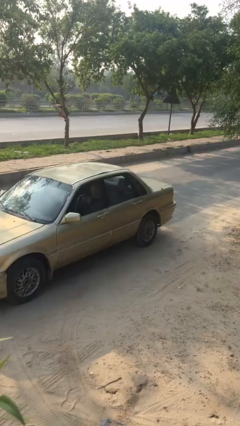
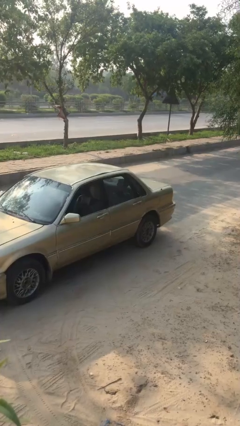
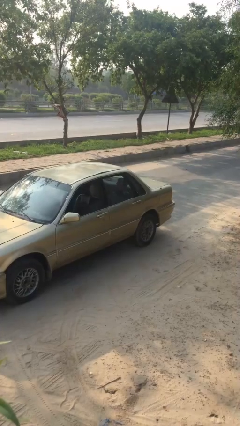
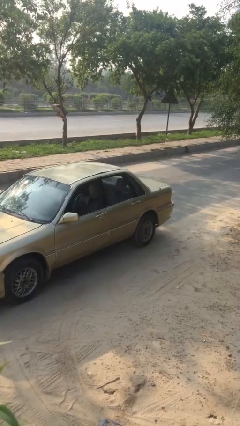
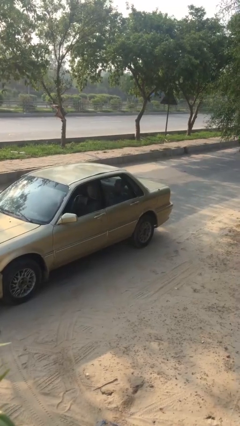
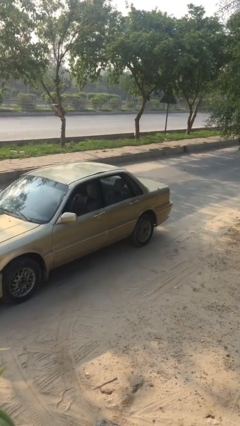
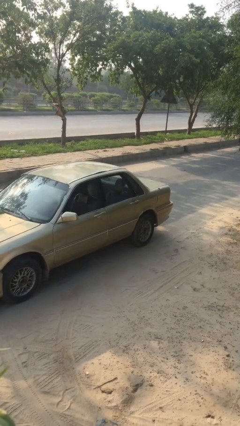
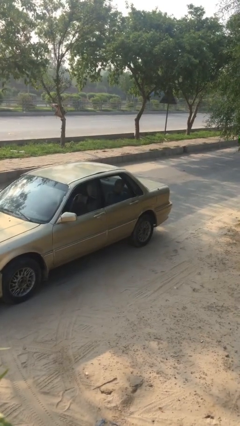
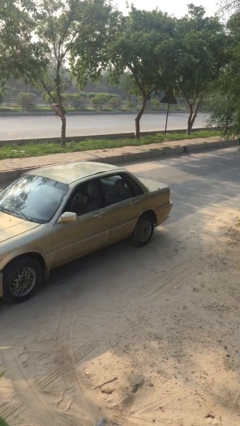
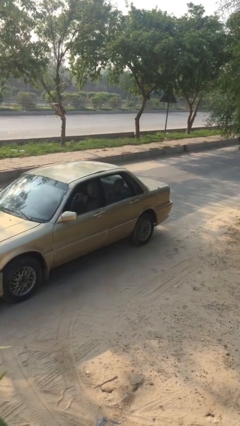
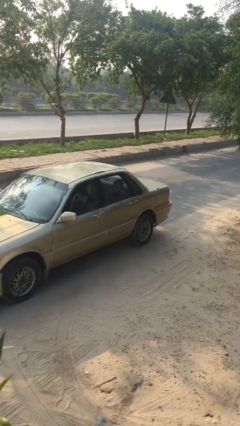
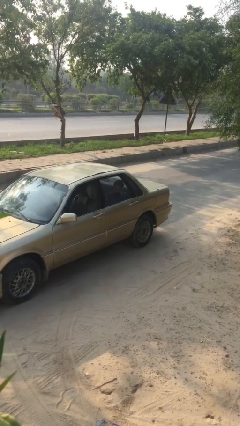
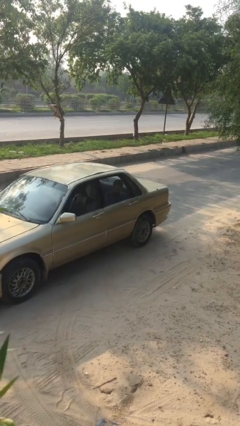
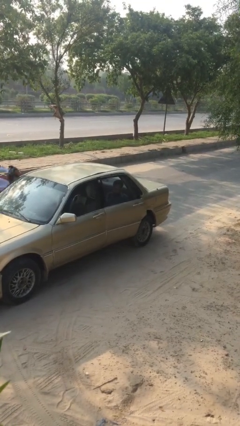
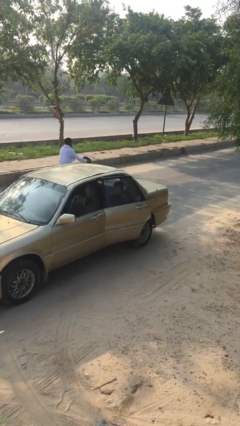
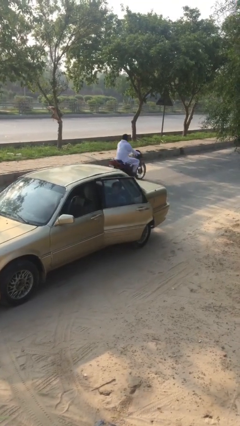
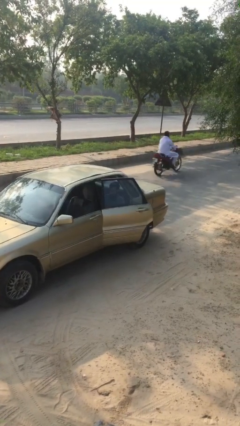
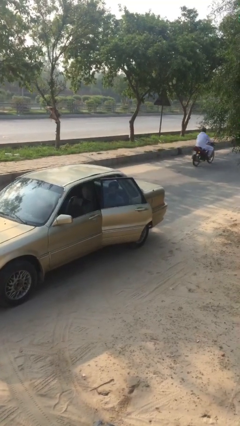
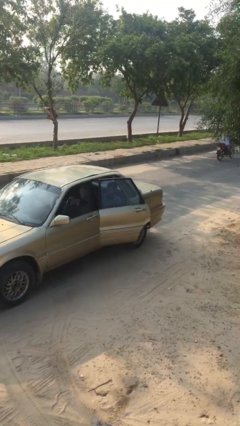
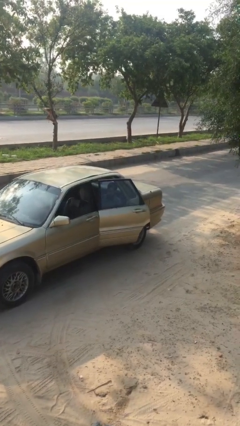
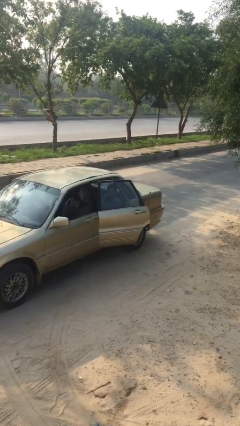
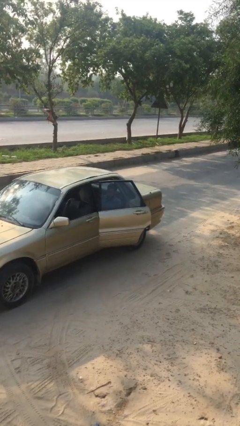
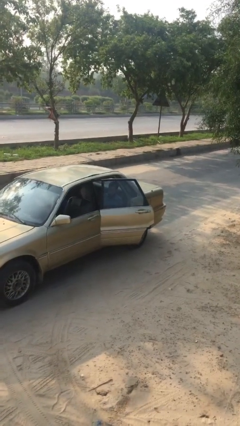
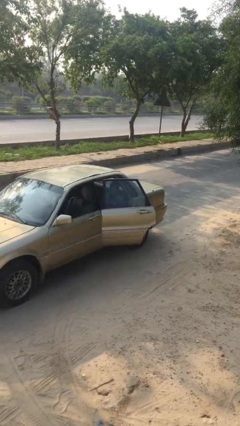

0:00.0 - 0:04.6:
person opens car door

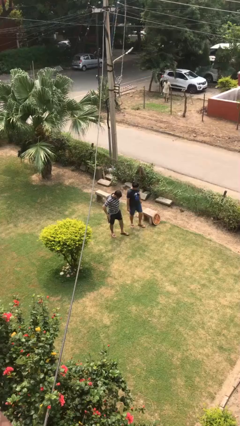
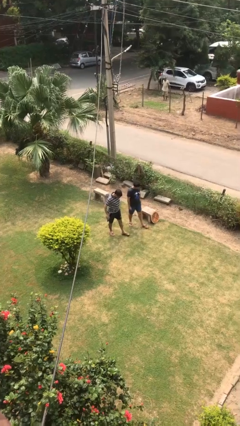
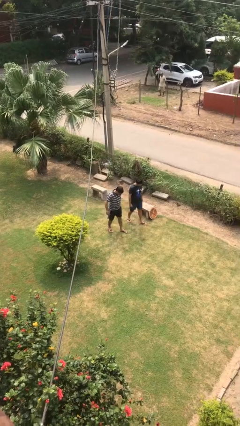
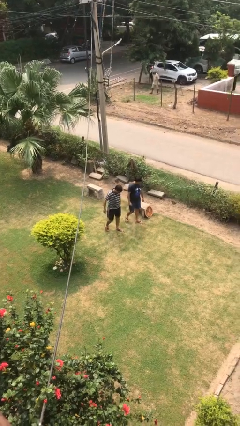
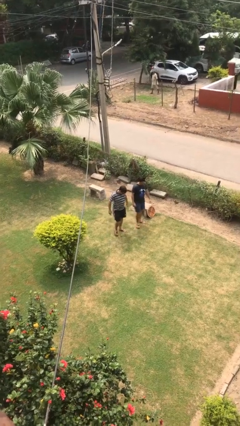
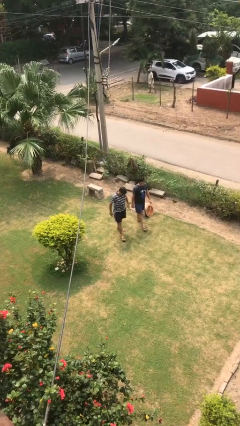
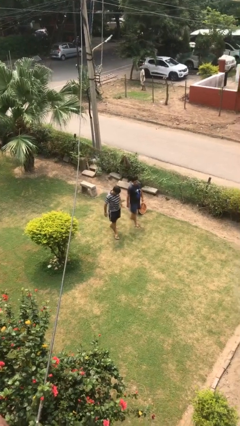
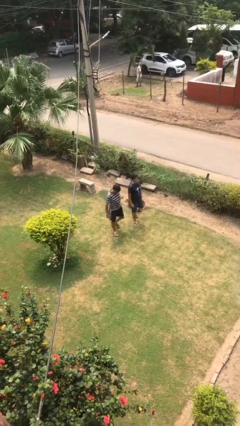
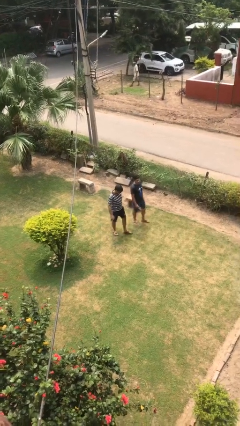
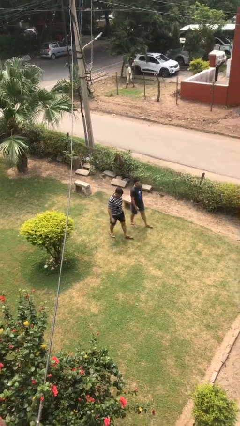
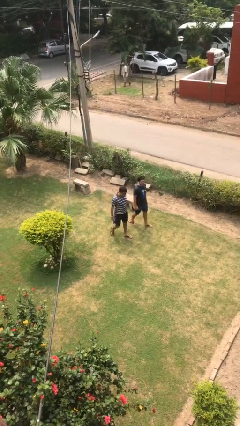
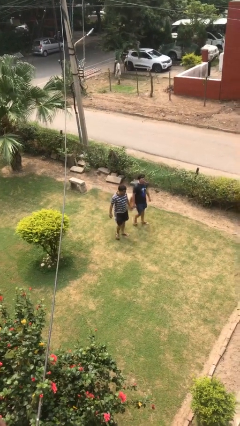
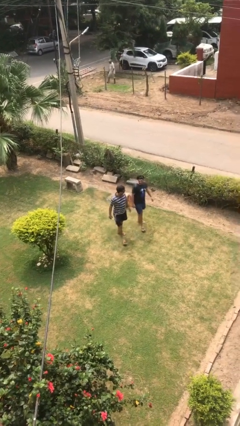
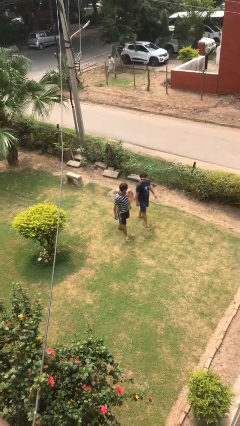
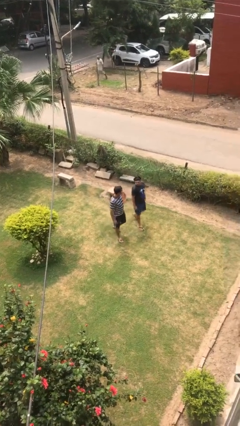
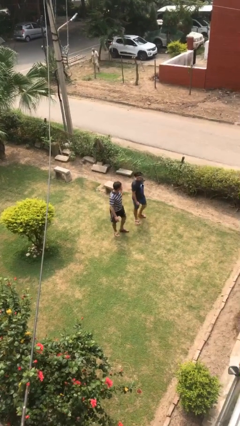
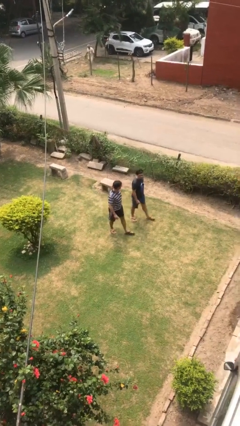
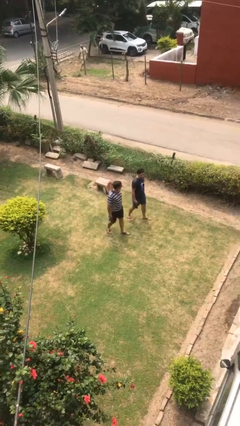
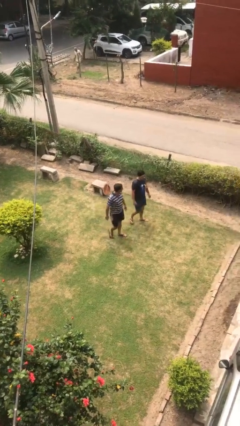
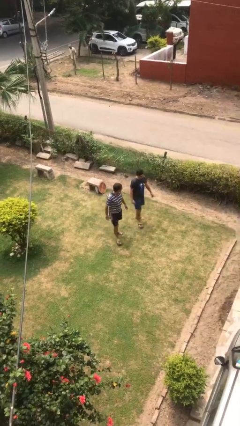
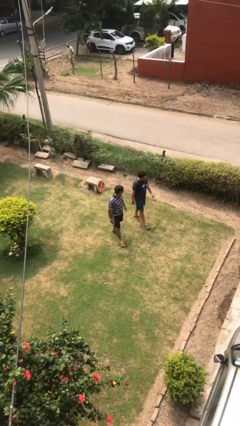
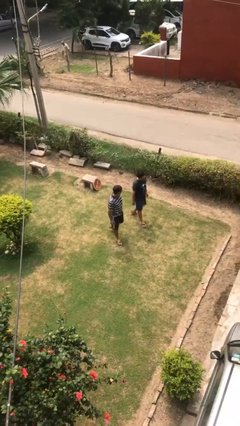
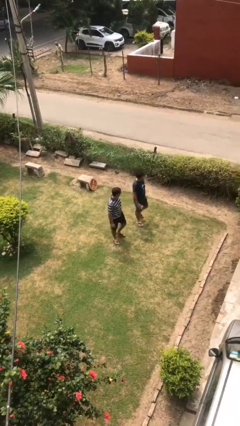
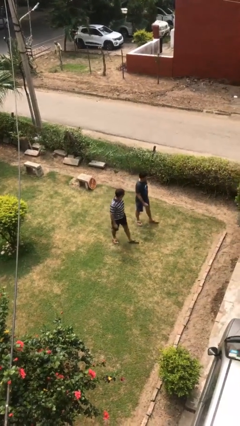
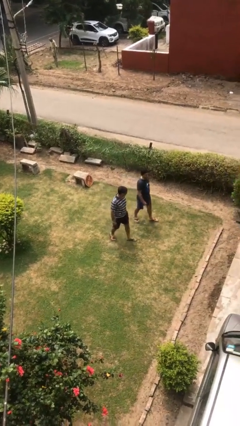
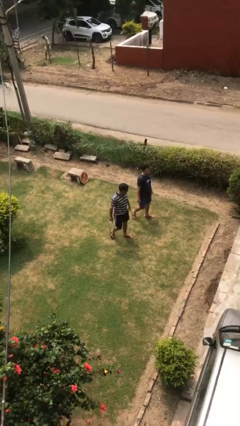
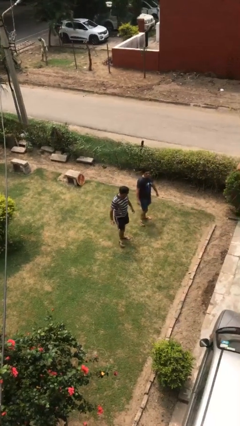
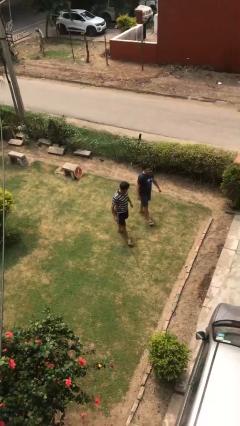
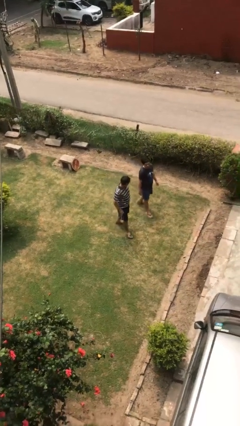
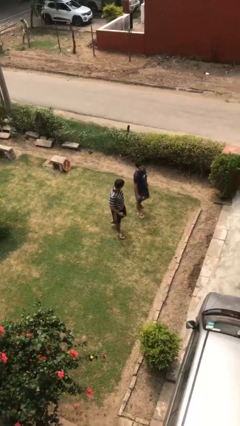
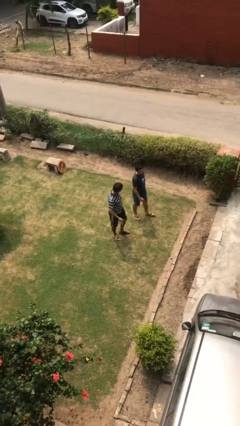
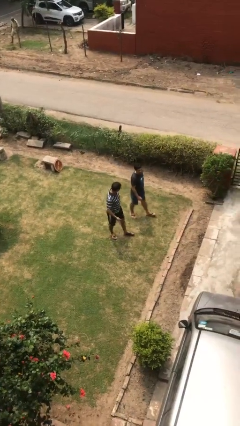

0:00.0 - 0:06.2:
person talks to person

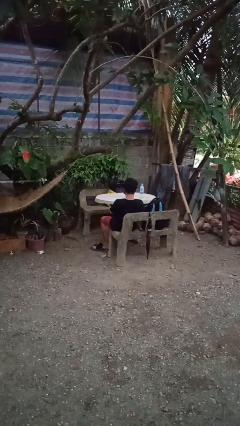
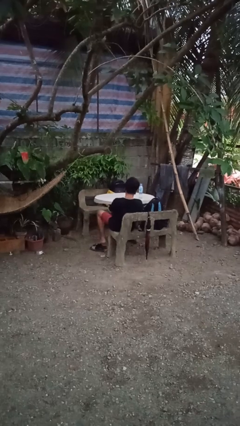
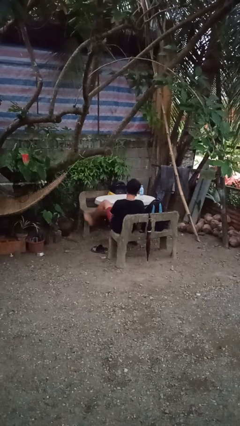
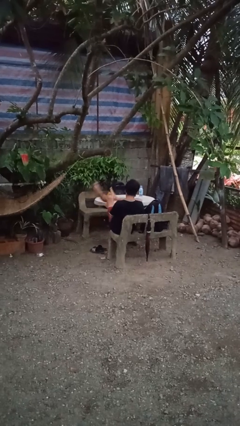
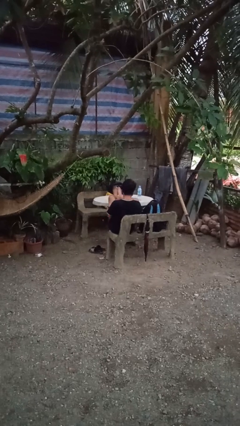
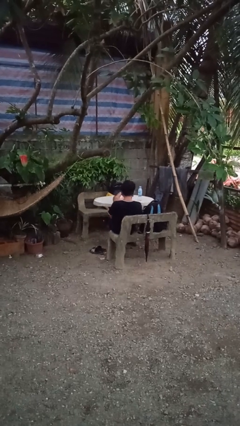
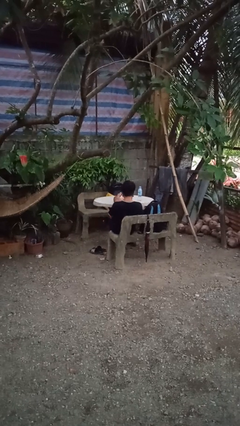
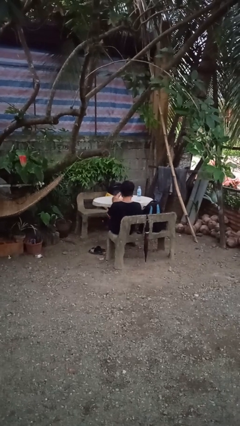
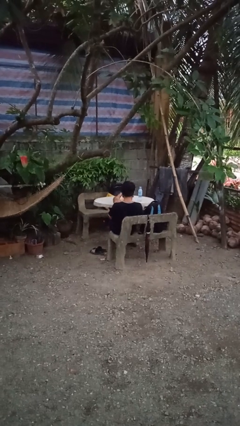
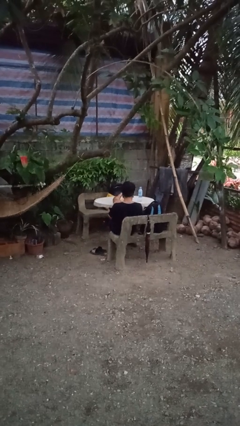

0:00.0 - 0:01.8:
person puts feet up

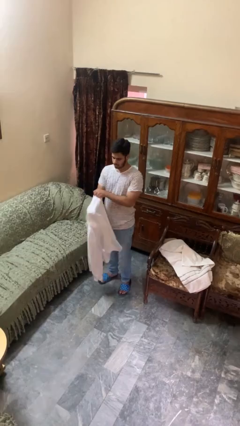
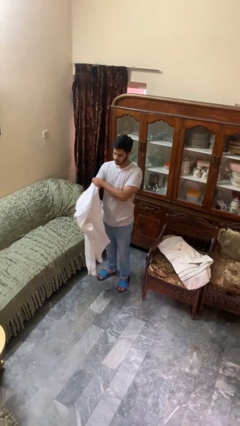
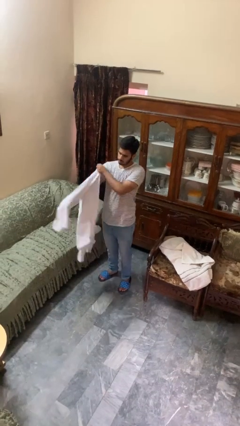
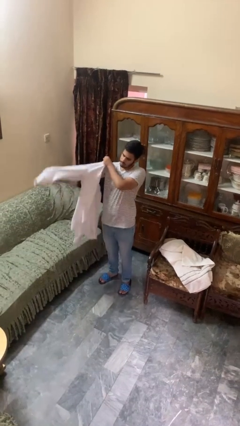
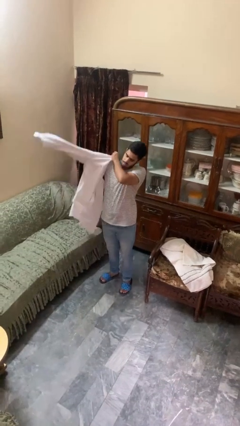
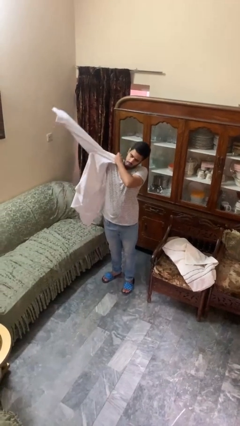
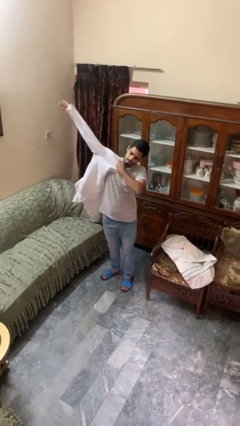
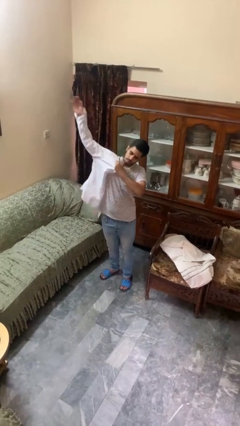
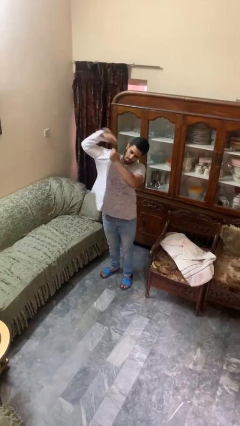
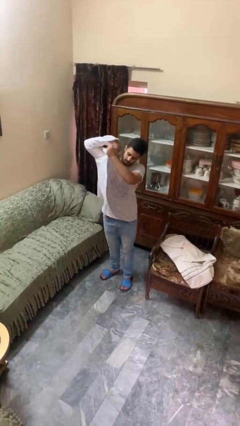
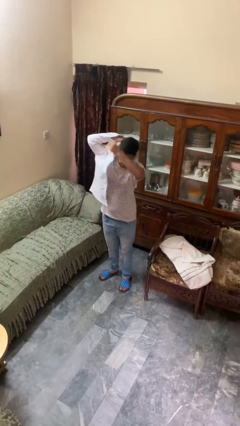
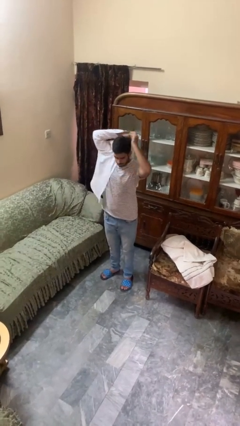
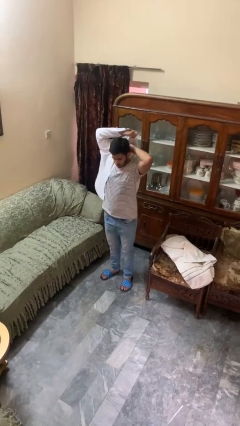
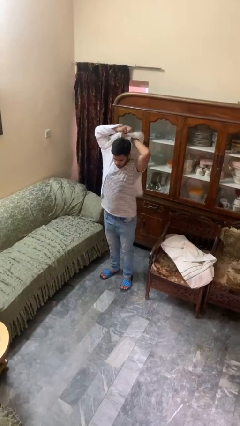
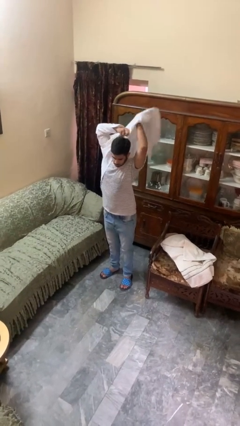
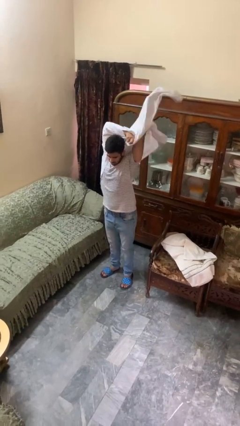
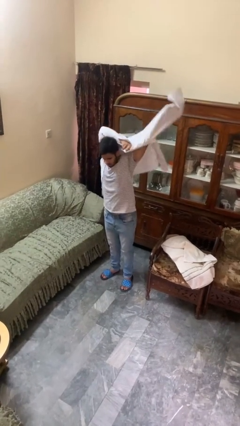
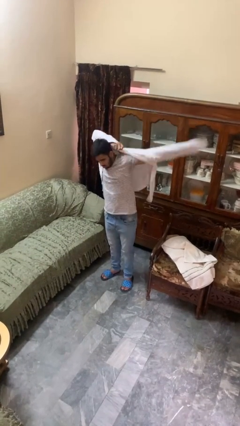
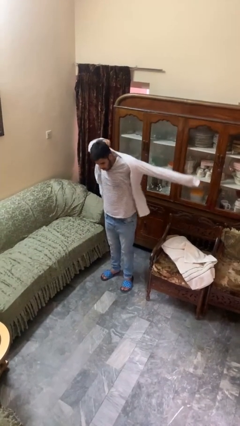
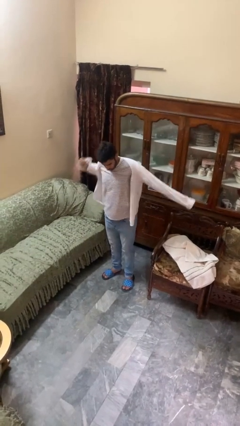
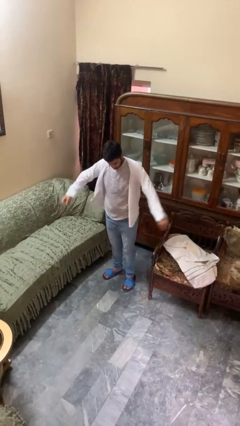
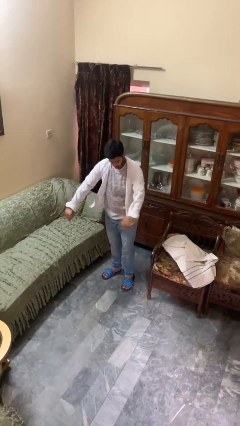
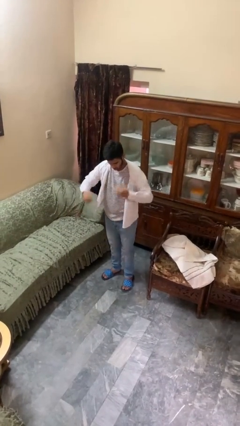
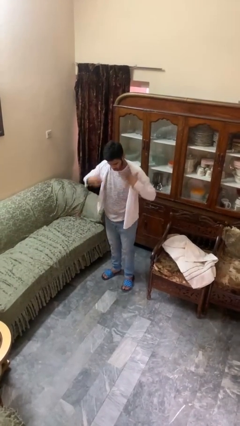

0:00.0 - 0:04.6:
person puts on shirt

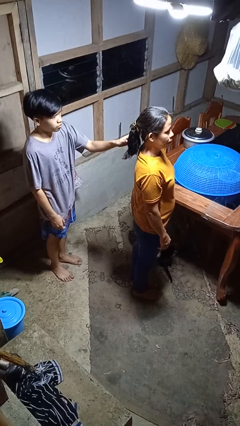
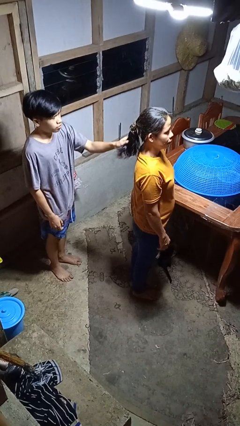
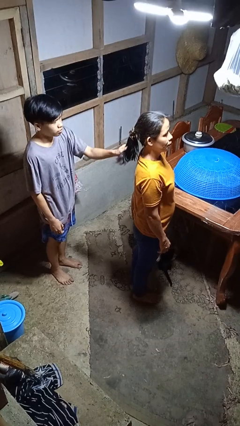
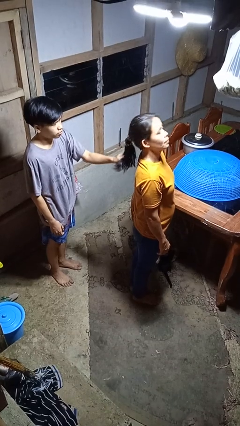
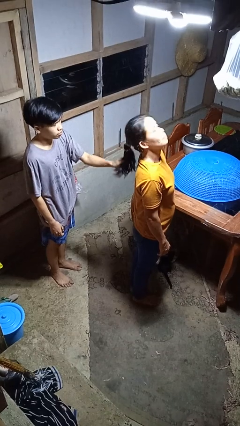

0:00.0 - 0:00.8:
person grabs person by hair
